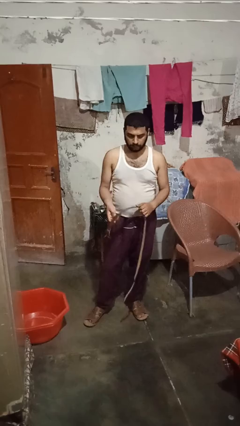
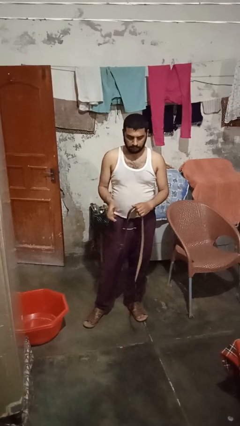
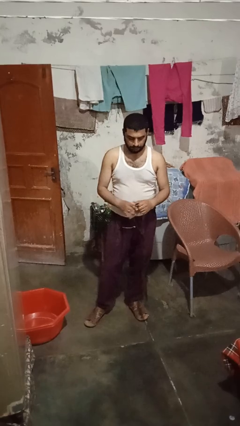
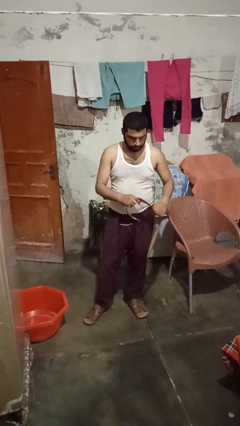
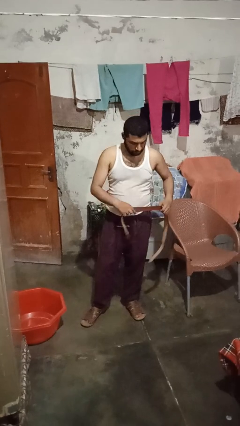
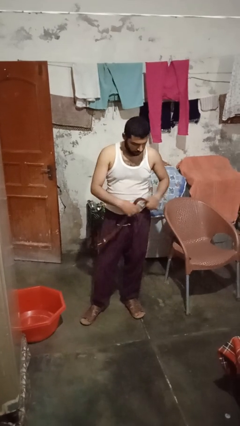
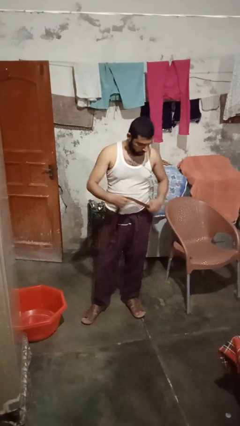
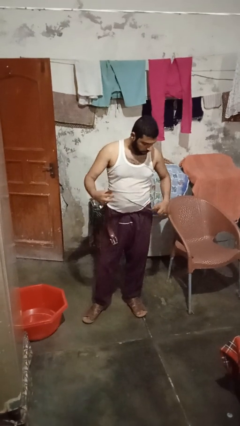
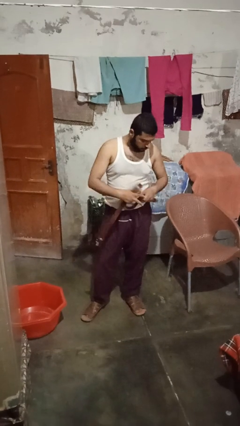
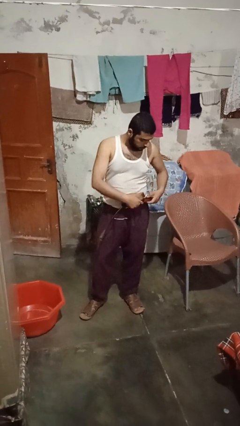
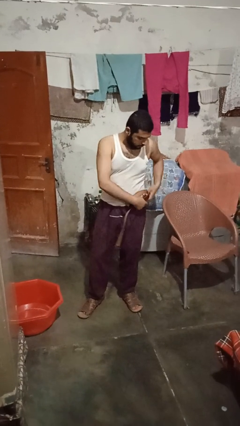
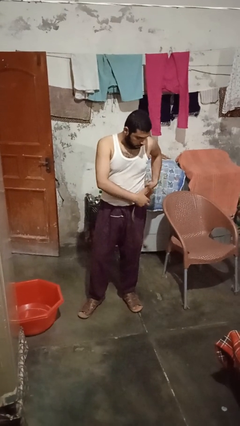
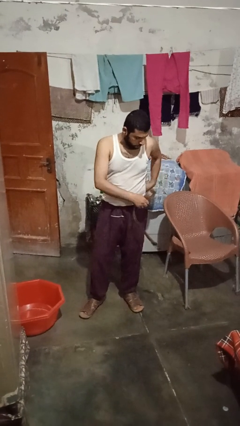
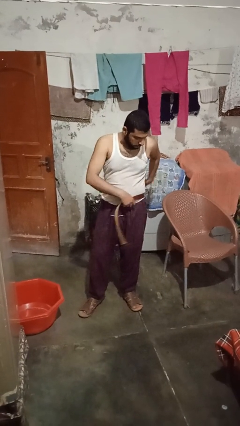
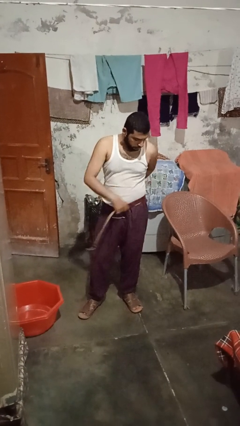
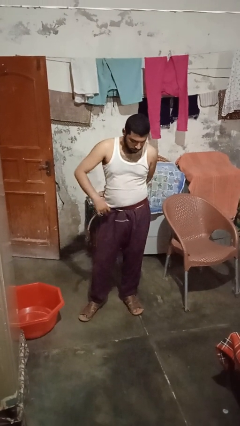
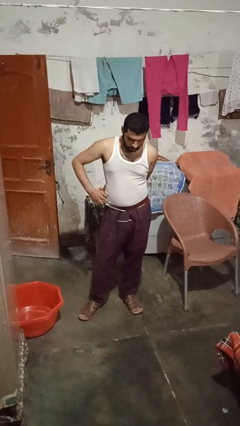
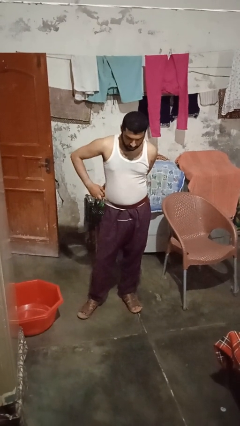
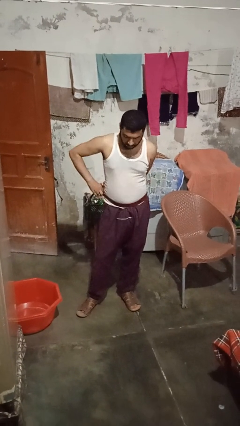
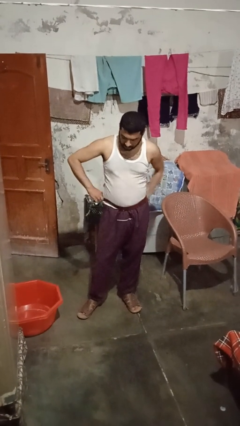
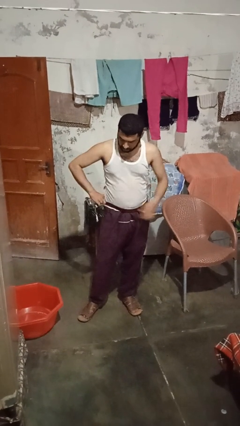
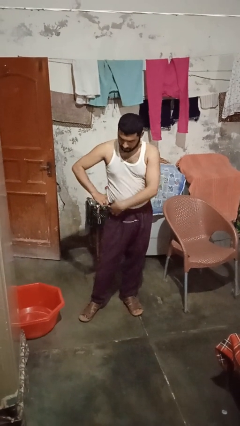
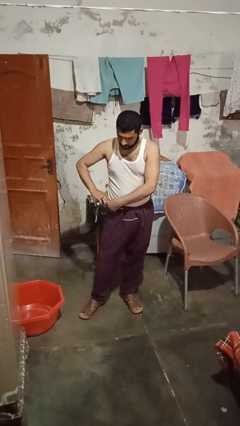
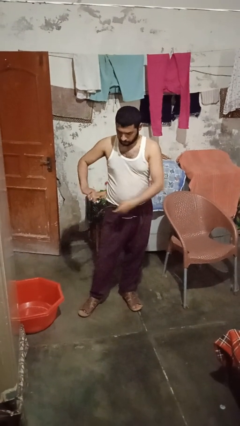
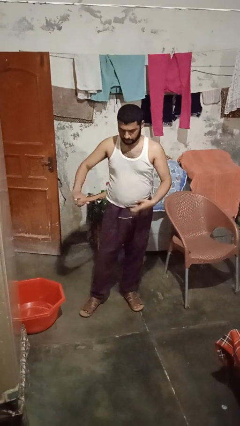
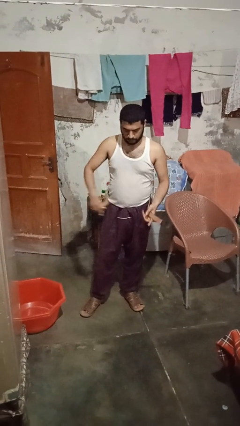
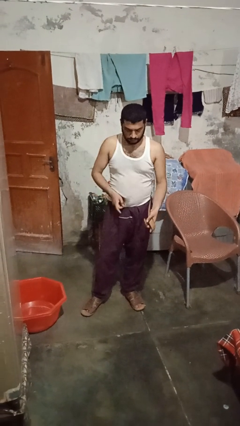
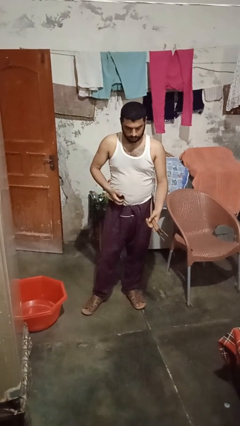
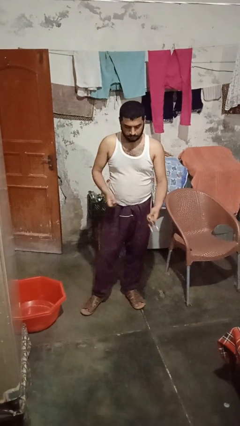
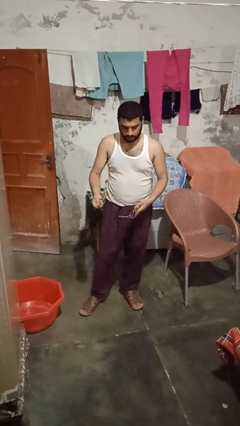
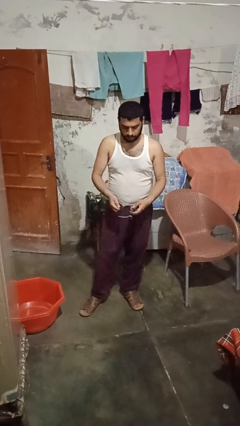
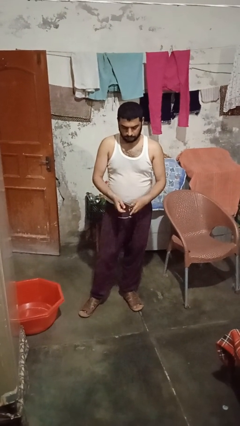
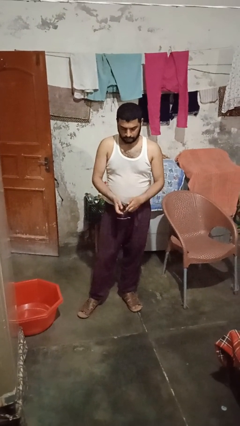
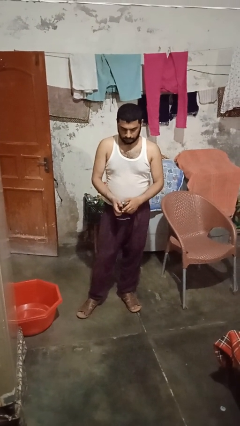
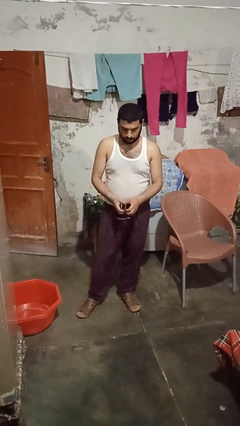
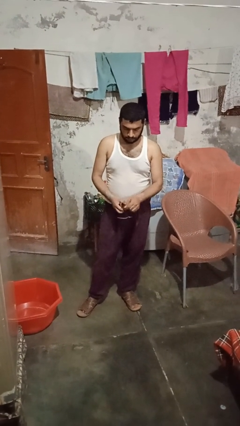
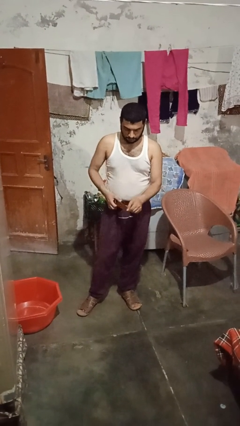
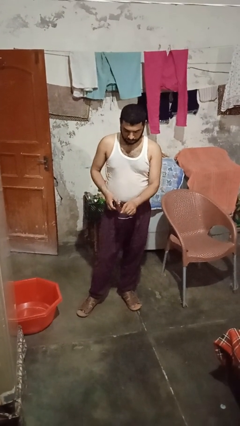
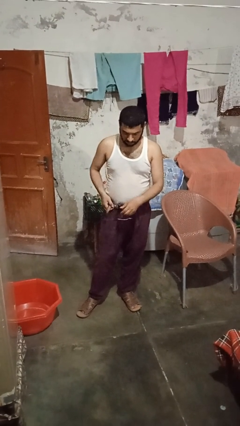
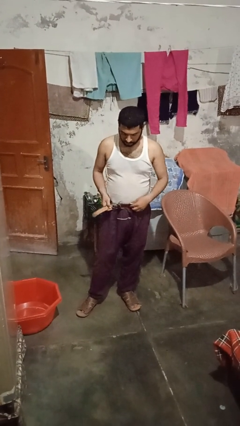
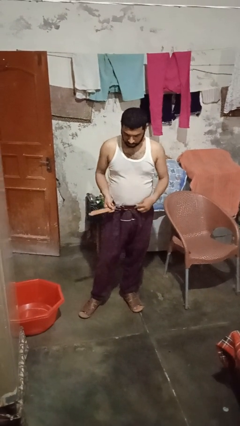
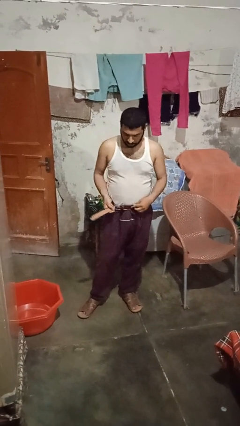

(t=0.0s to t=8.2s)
person puts on belt

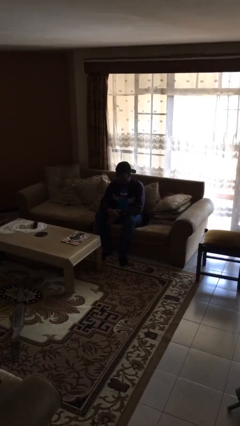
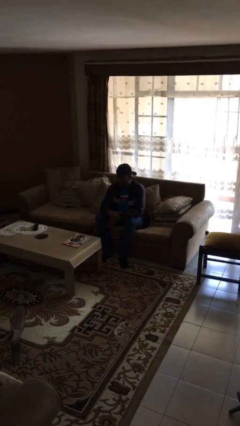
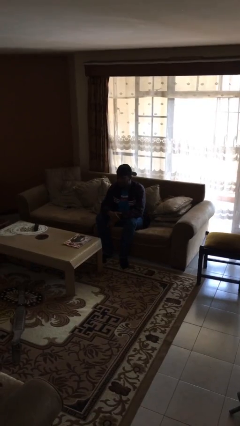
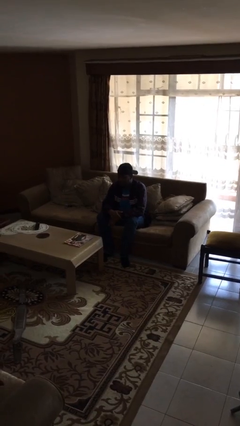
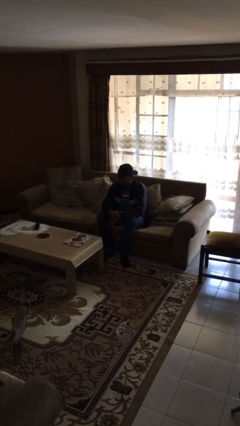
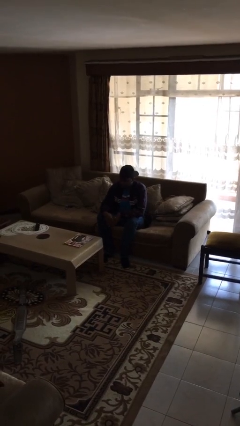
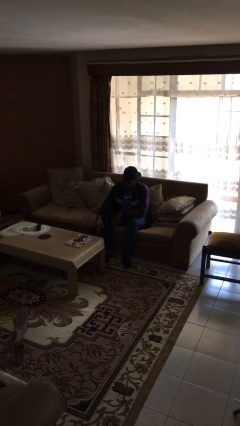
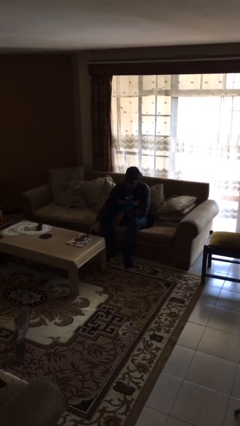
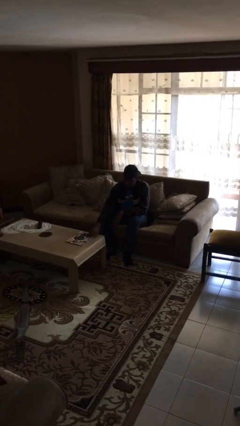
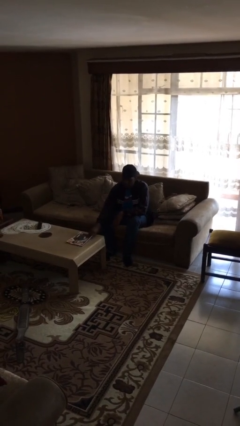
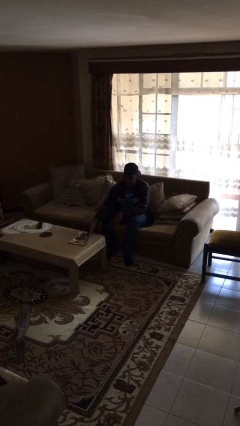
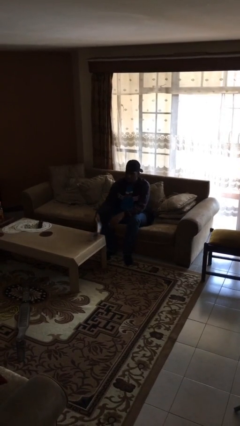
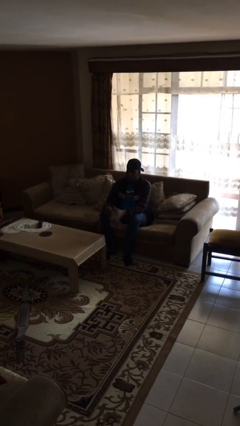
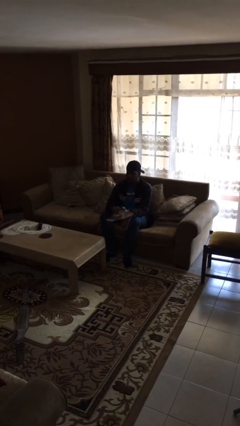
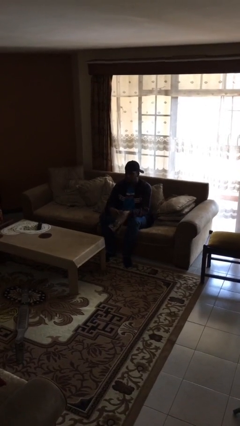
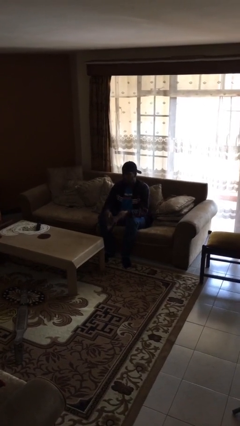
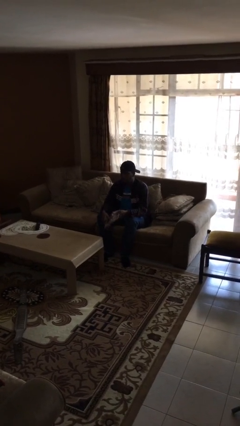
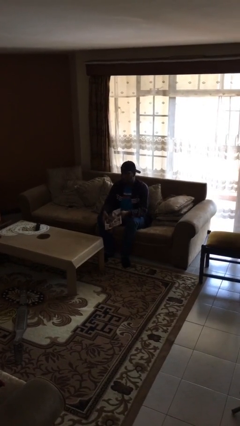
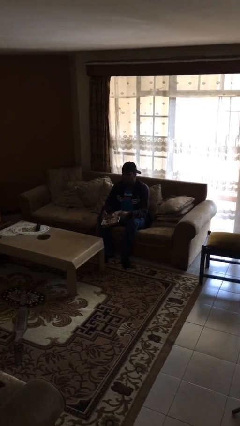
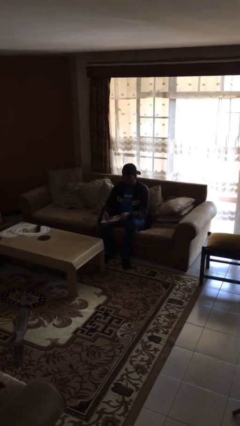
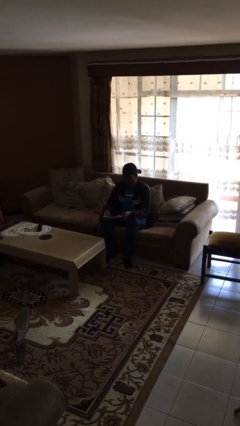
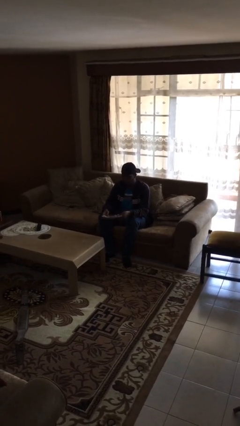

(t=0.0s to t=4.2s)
person picks up object from table

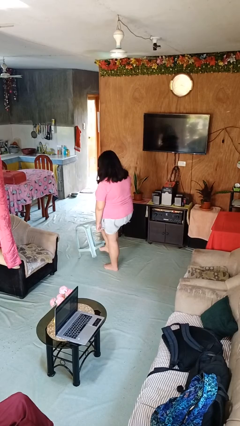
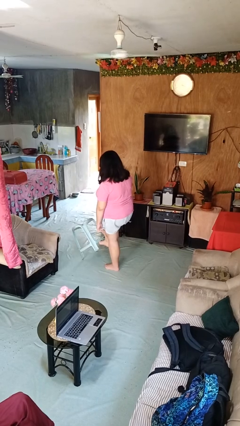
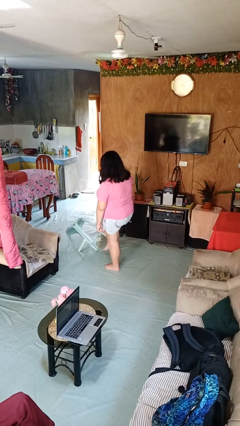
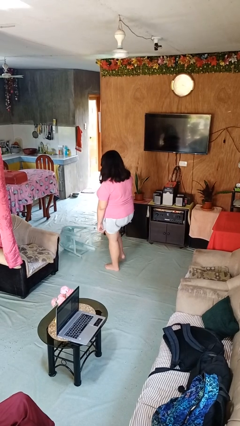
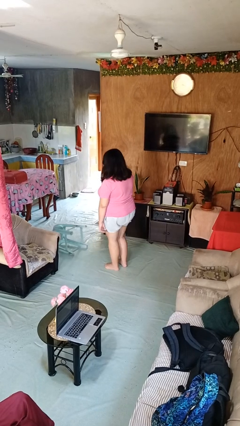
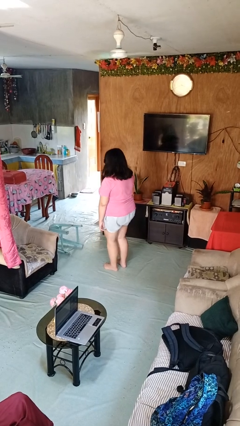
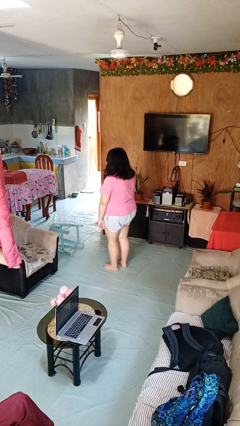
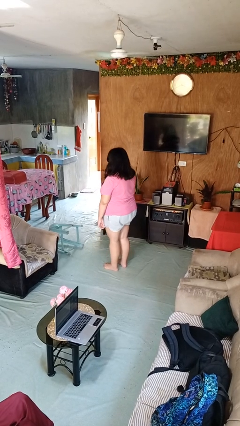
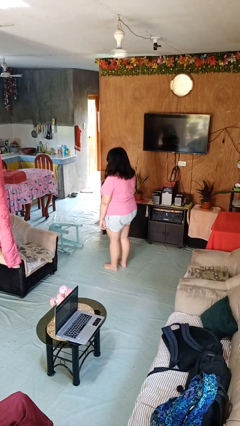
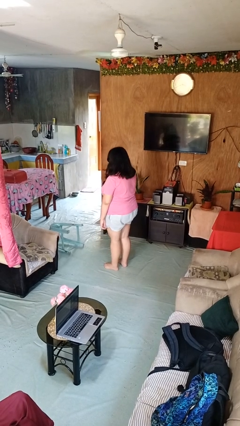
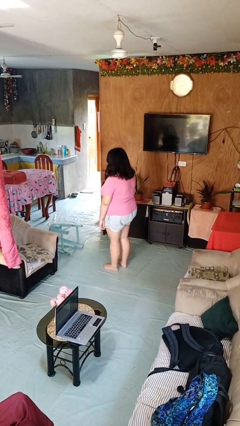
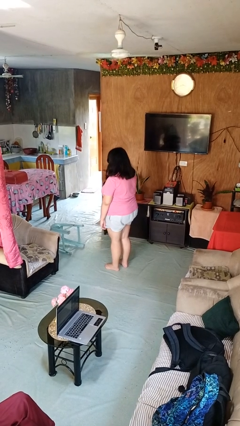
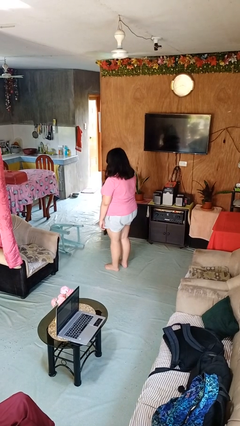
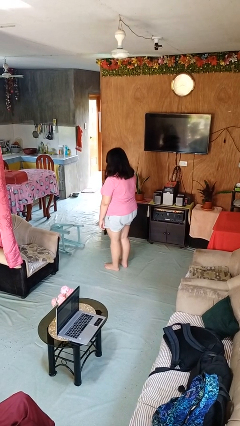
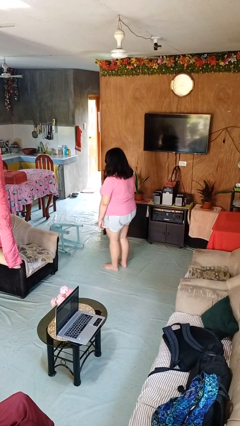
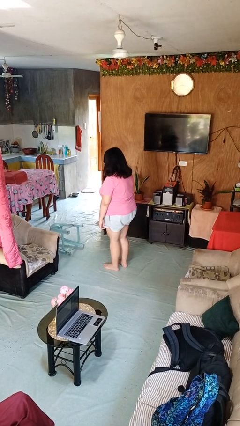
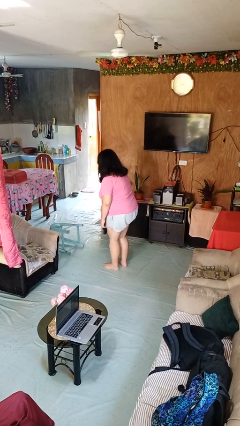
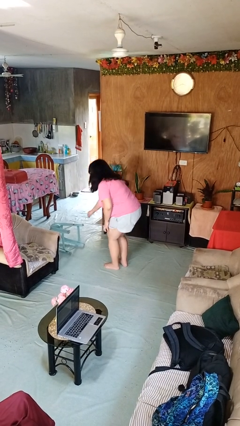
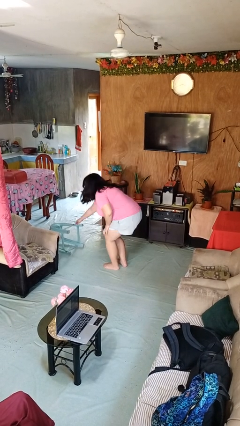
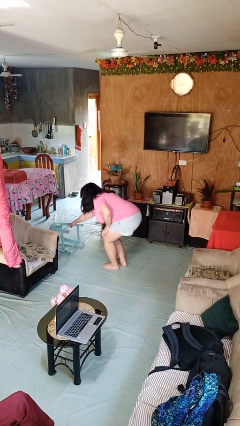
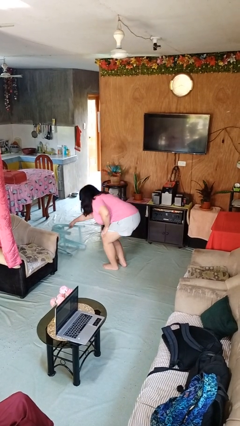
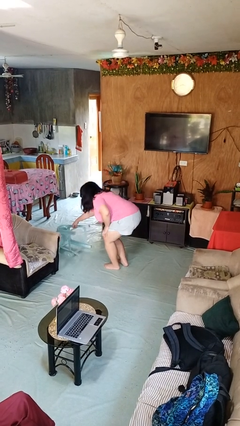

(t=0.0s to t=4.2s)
person knocks over furniture

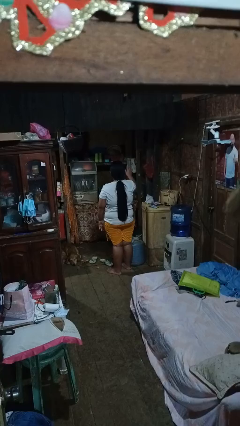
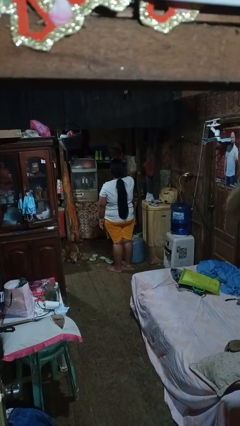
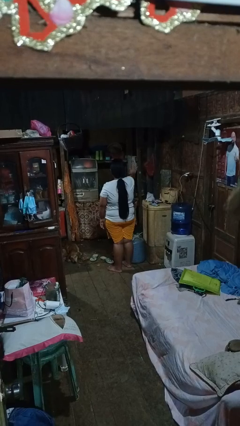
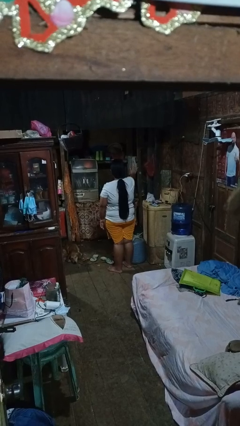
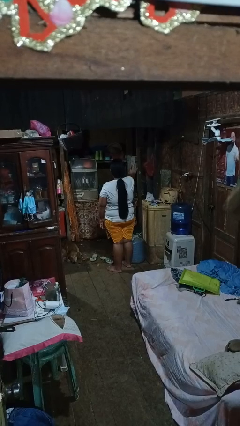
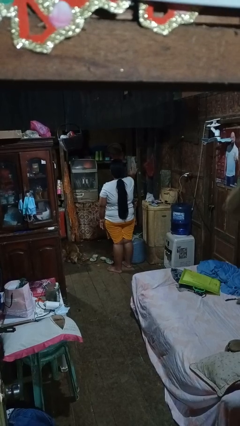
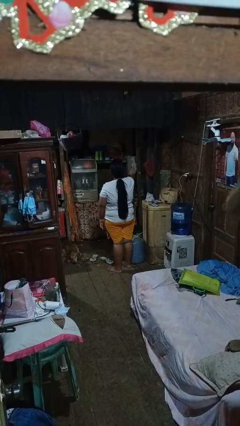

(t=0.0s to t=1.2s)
person gestures stop

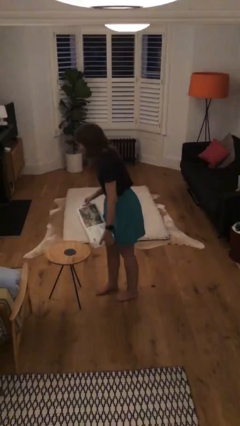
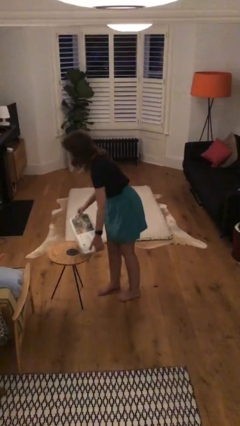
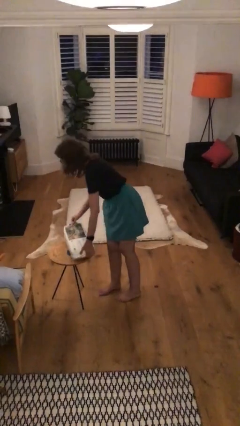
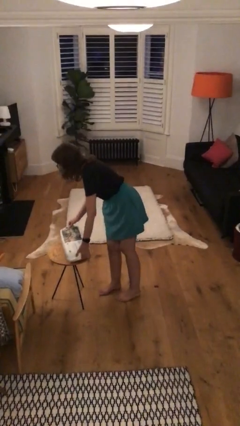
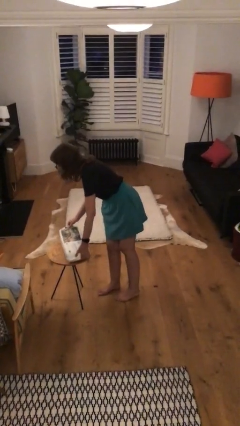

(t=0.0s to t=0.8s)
person puts down object on table
